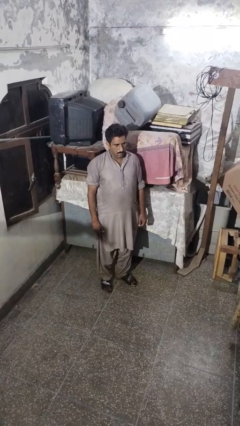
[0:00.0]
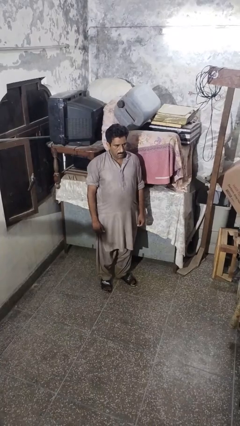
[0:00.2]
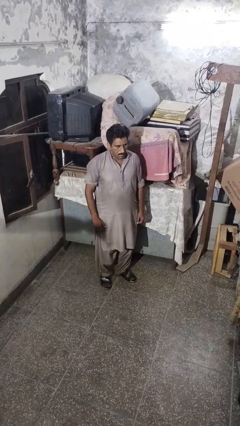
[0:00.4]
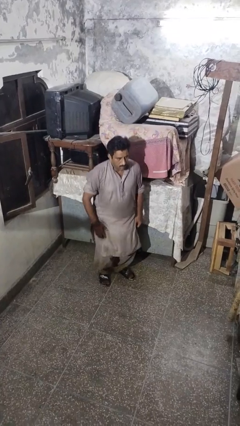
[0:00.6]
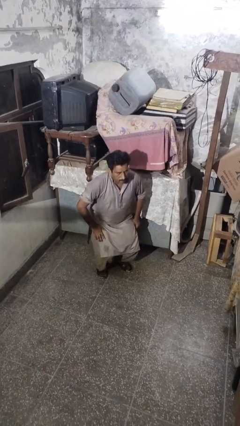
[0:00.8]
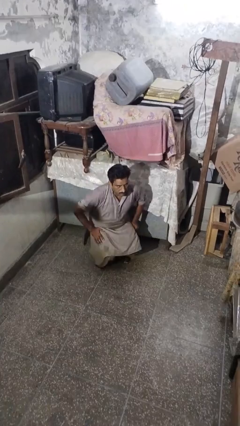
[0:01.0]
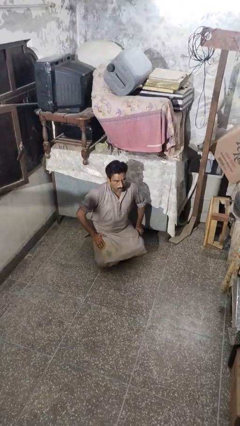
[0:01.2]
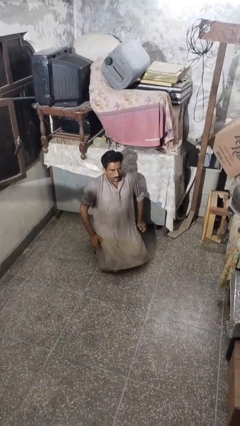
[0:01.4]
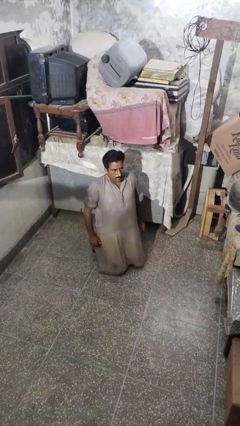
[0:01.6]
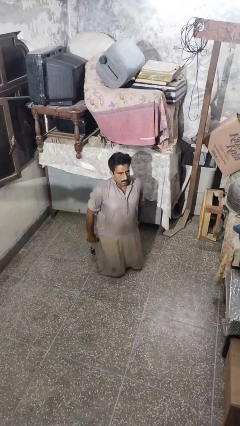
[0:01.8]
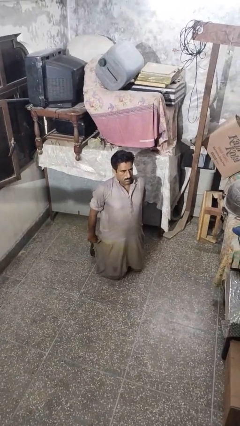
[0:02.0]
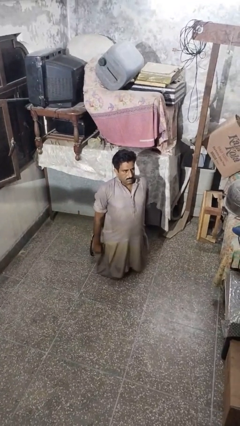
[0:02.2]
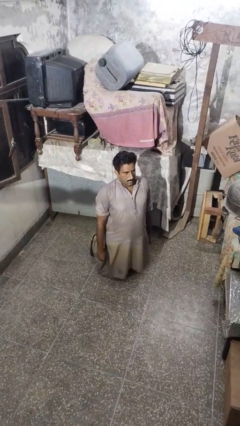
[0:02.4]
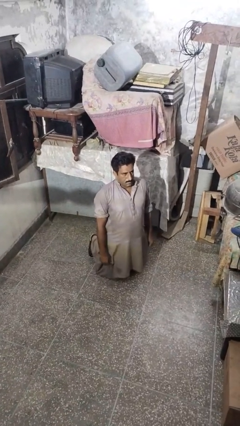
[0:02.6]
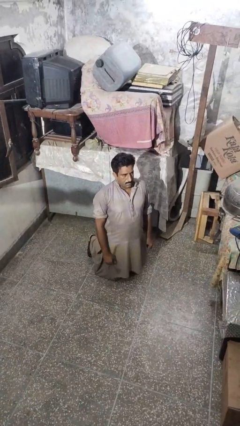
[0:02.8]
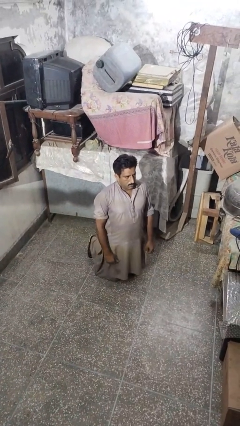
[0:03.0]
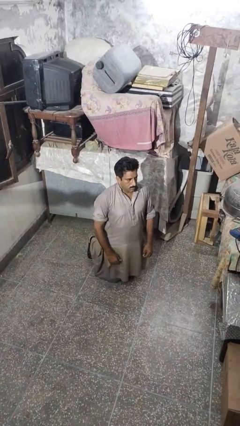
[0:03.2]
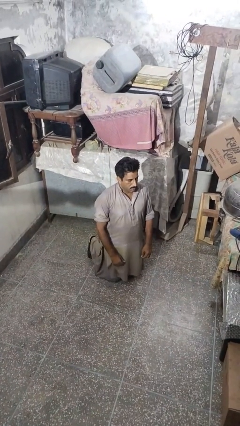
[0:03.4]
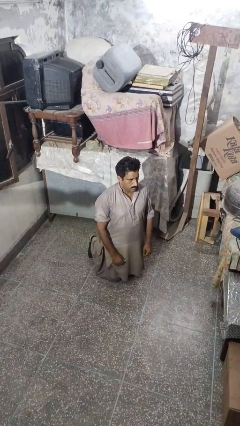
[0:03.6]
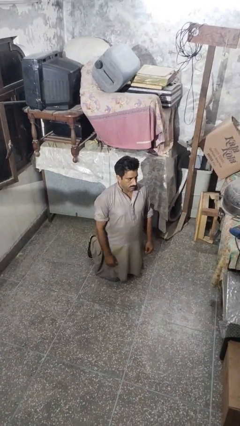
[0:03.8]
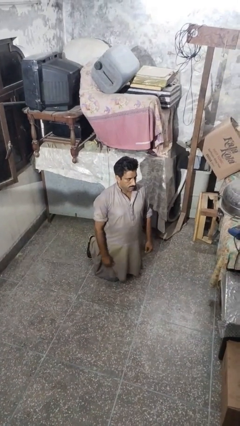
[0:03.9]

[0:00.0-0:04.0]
person kneels

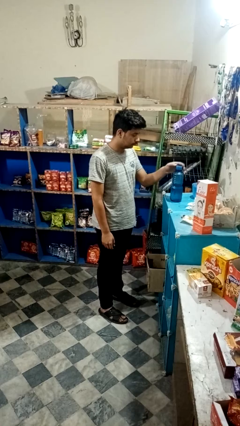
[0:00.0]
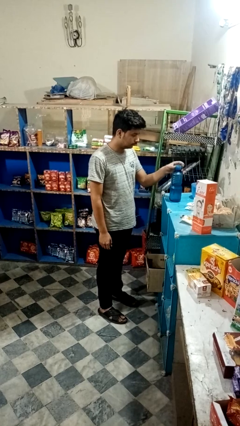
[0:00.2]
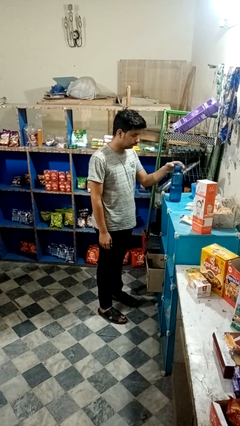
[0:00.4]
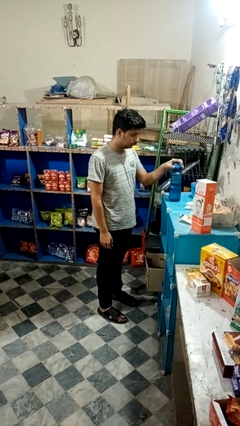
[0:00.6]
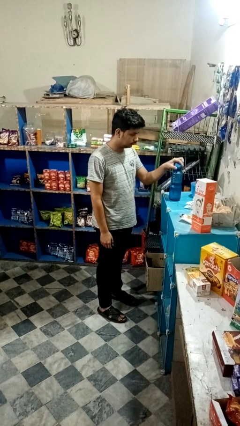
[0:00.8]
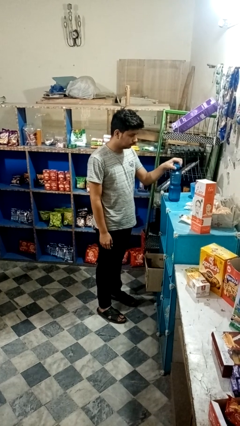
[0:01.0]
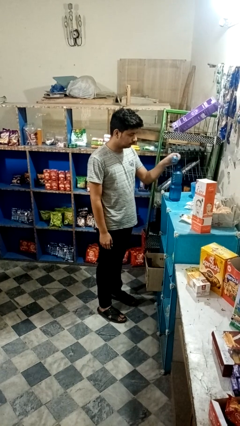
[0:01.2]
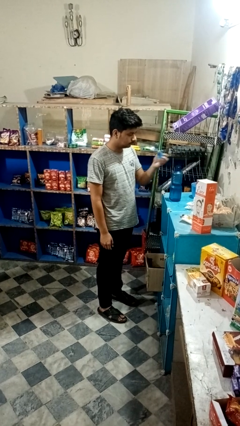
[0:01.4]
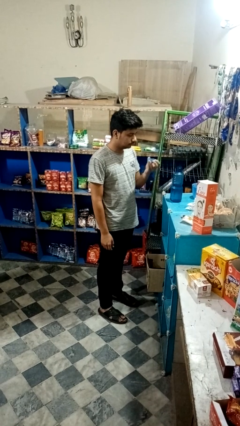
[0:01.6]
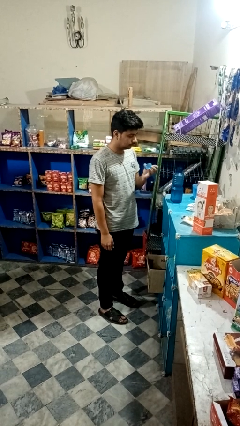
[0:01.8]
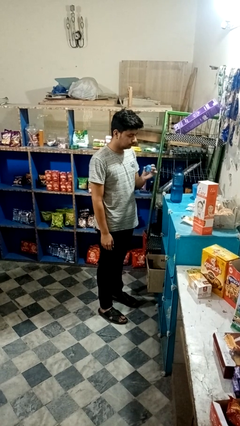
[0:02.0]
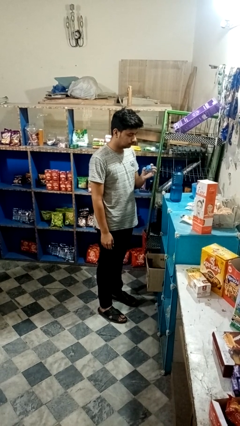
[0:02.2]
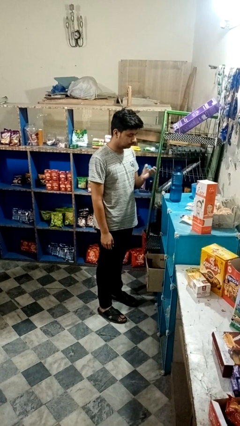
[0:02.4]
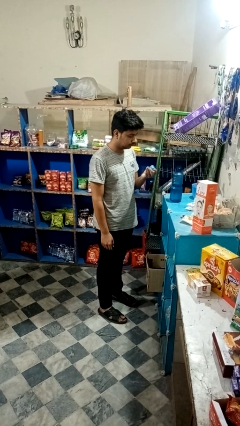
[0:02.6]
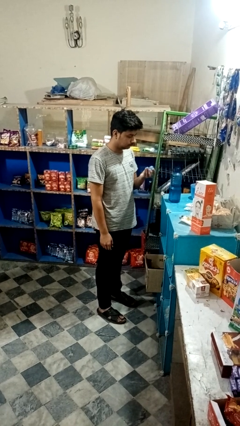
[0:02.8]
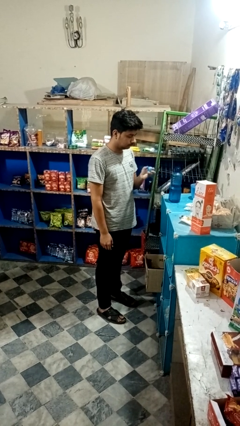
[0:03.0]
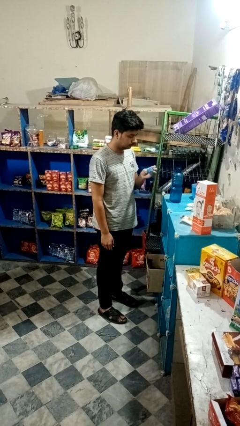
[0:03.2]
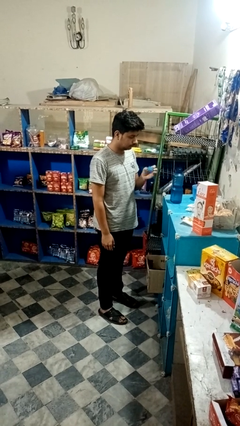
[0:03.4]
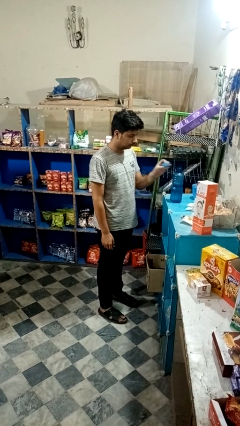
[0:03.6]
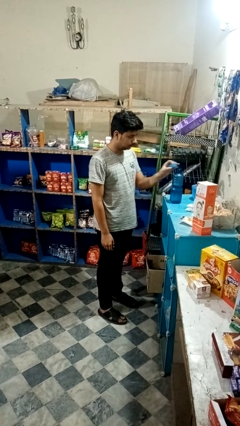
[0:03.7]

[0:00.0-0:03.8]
person unscrews lid from bottle

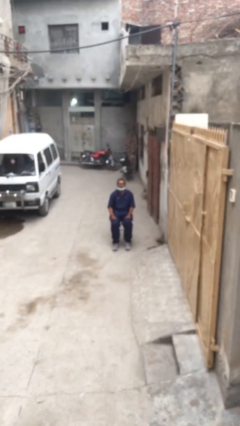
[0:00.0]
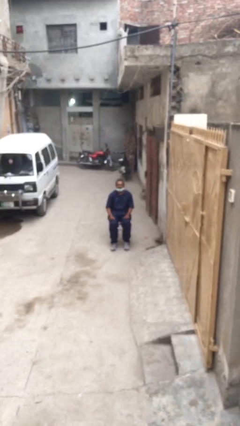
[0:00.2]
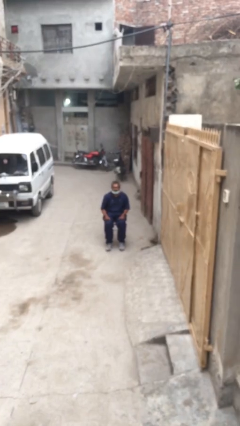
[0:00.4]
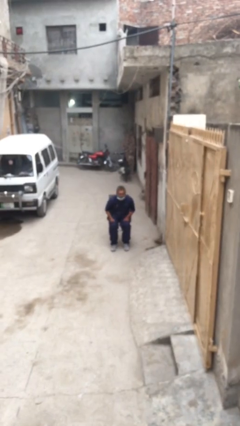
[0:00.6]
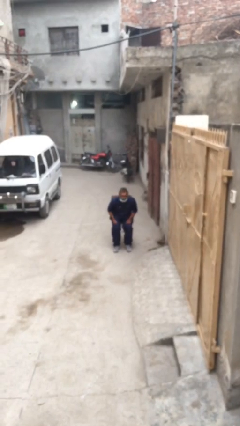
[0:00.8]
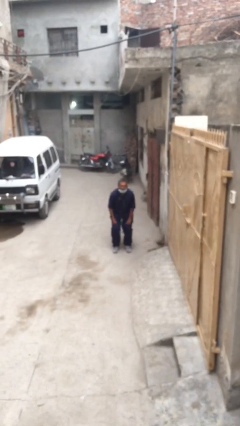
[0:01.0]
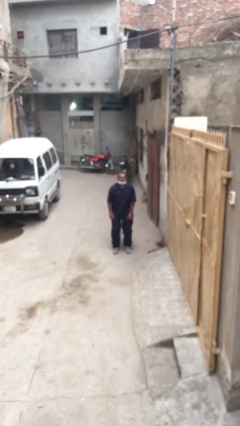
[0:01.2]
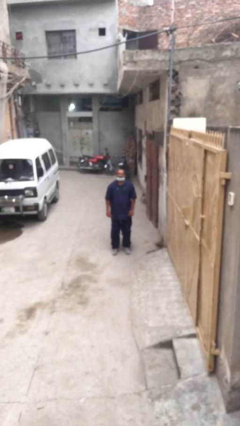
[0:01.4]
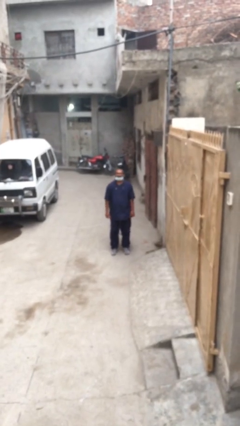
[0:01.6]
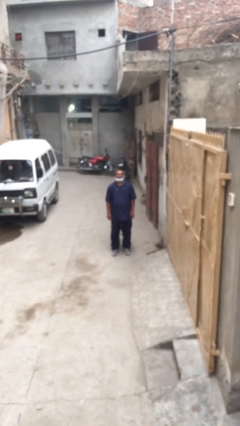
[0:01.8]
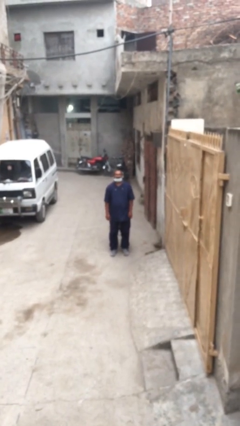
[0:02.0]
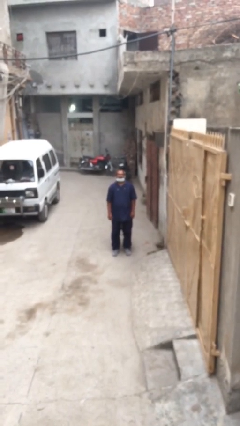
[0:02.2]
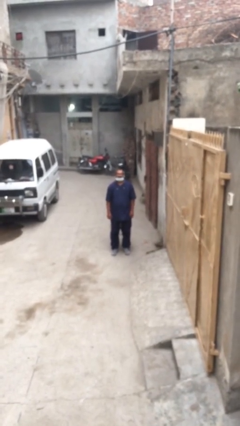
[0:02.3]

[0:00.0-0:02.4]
person stands up

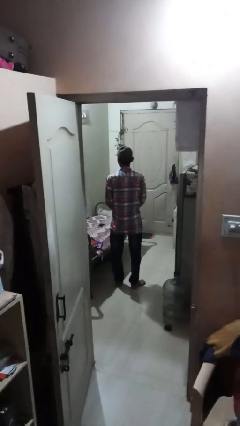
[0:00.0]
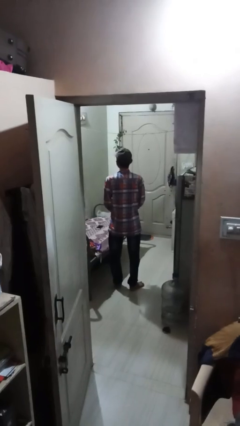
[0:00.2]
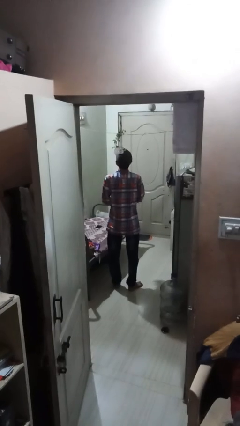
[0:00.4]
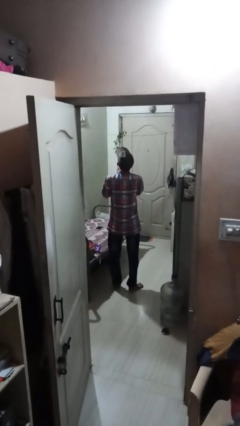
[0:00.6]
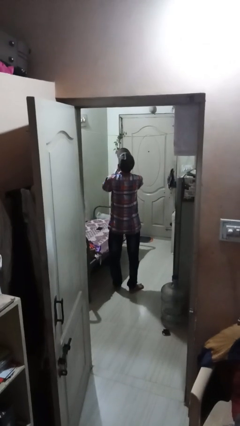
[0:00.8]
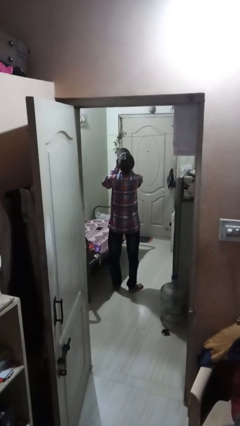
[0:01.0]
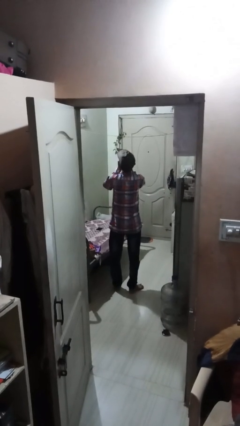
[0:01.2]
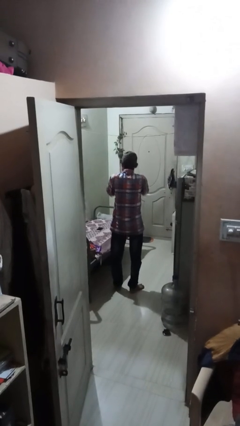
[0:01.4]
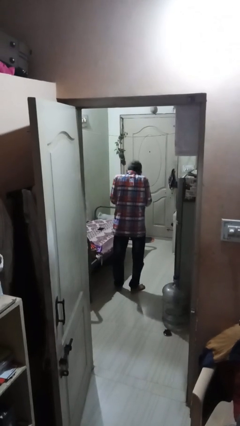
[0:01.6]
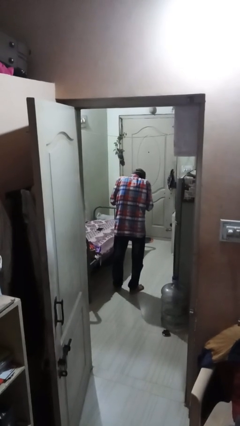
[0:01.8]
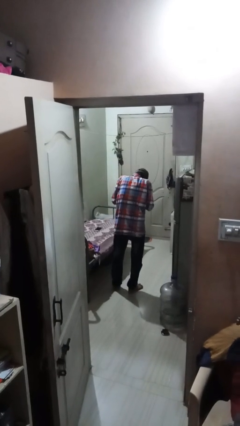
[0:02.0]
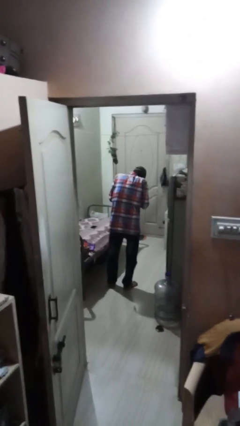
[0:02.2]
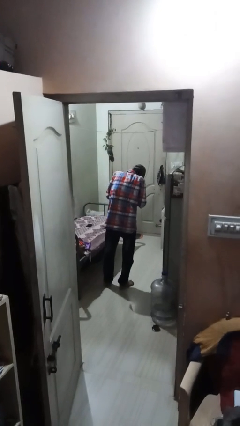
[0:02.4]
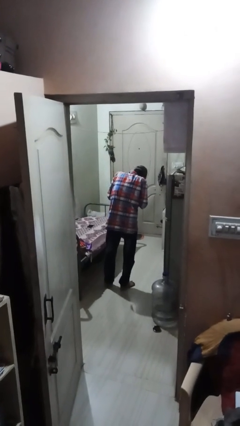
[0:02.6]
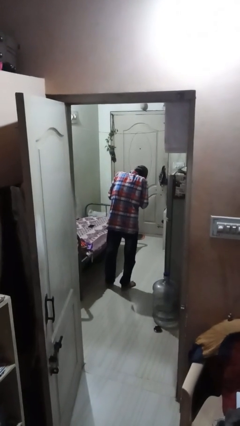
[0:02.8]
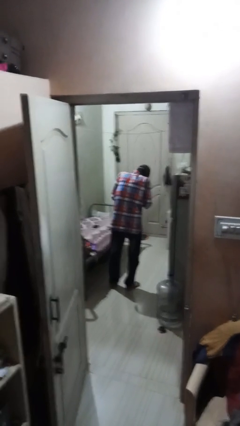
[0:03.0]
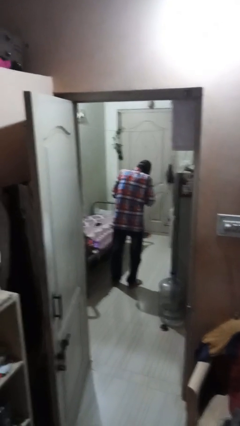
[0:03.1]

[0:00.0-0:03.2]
person sneezes into hand

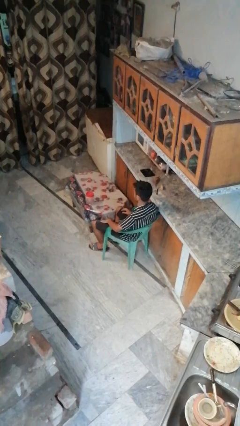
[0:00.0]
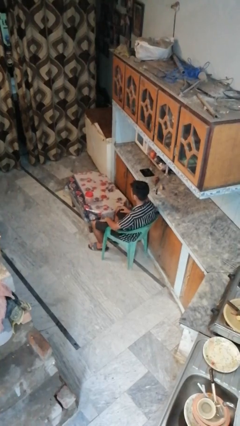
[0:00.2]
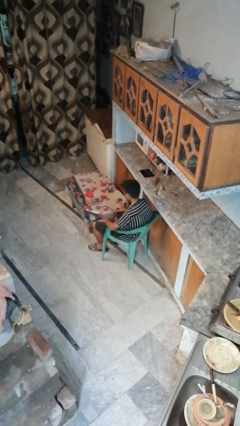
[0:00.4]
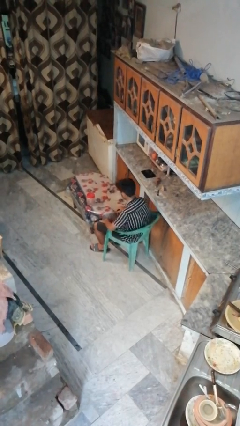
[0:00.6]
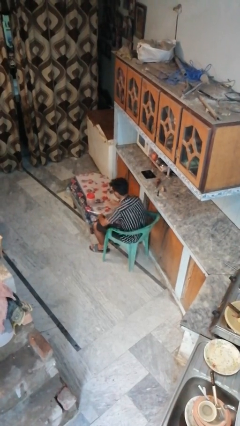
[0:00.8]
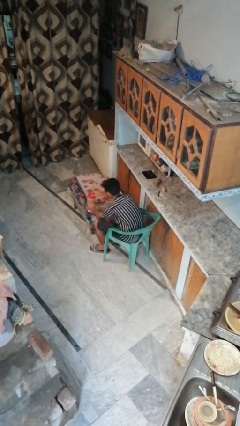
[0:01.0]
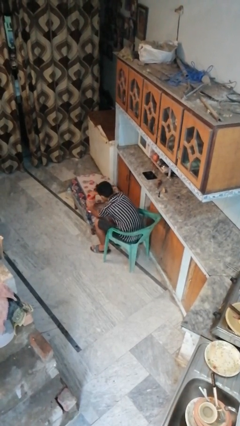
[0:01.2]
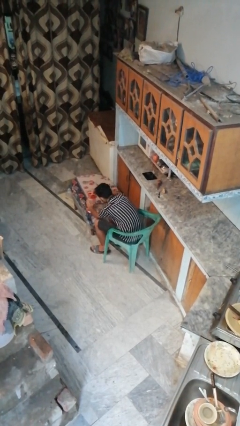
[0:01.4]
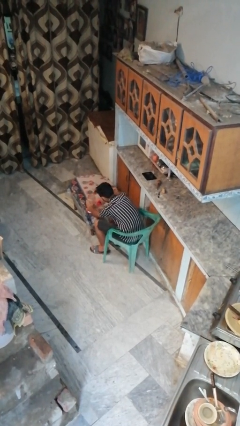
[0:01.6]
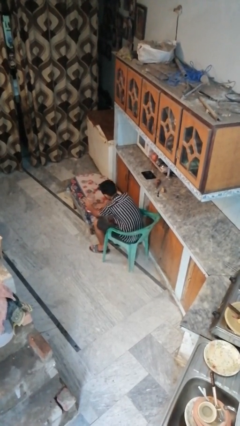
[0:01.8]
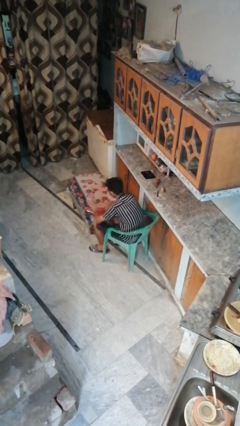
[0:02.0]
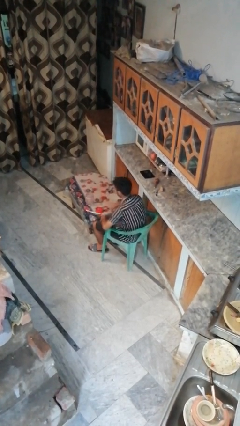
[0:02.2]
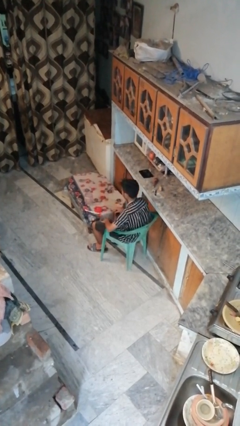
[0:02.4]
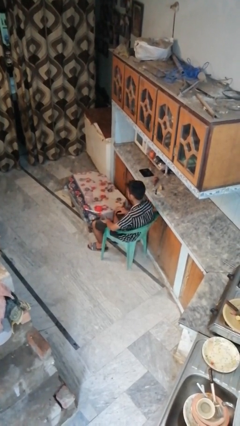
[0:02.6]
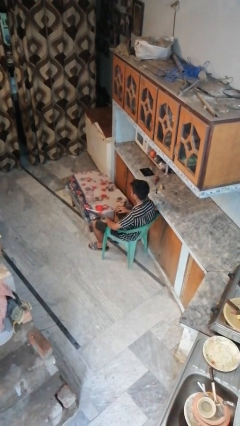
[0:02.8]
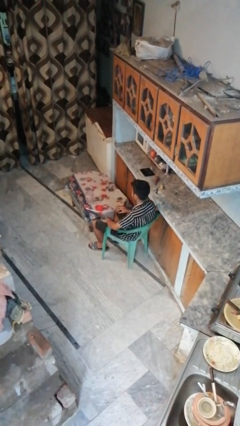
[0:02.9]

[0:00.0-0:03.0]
person opens jar

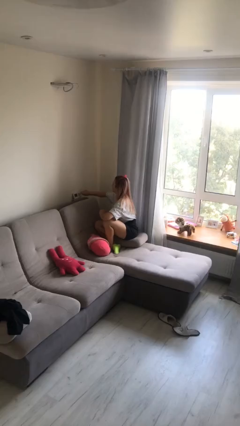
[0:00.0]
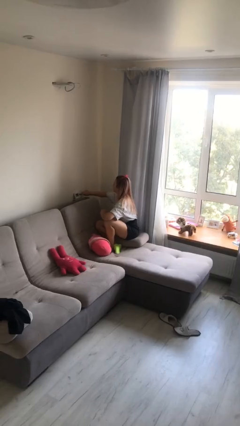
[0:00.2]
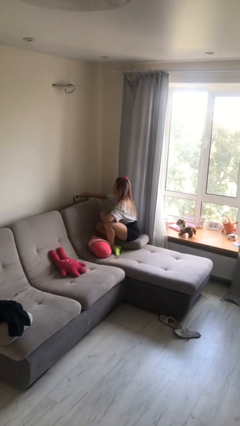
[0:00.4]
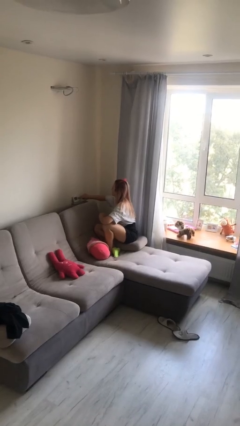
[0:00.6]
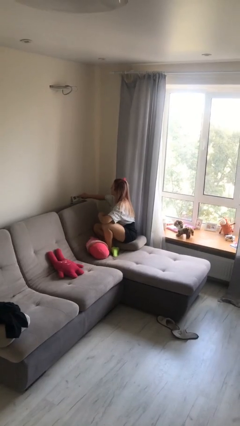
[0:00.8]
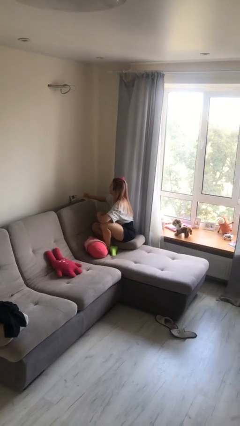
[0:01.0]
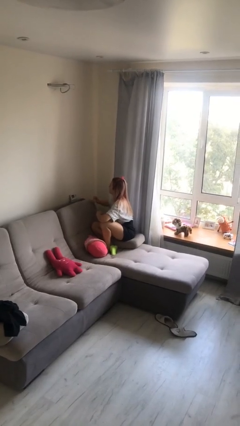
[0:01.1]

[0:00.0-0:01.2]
person adjusts thermostat
